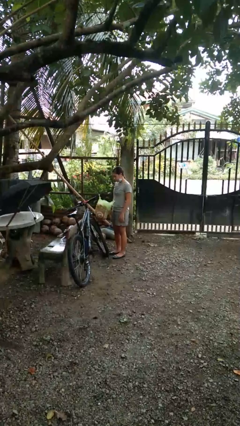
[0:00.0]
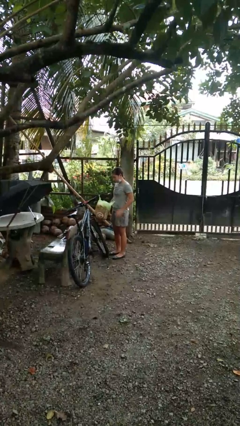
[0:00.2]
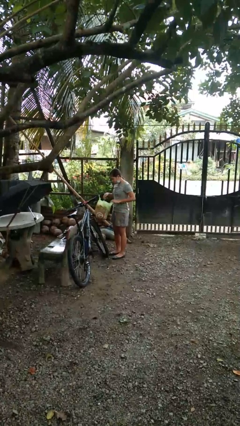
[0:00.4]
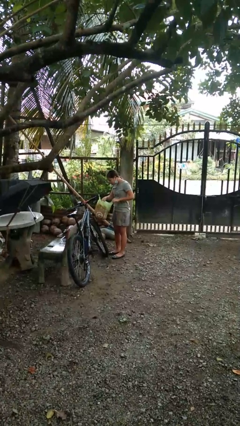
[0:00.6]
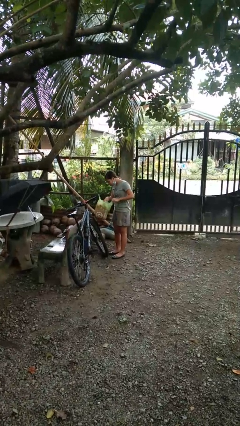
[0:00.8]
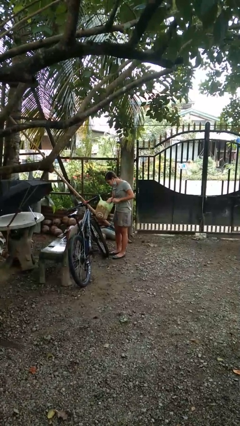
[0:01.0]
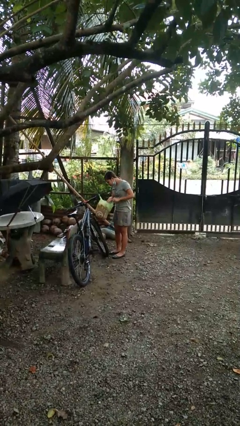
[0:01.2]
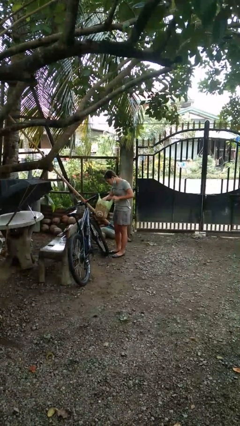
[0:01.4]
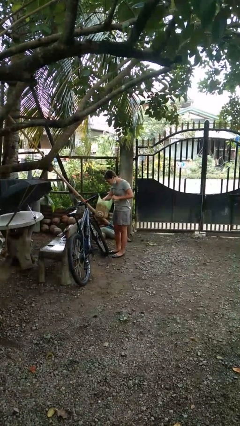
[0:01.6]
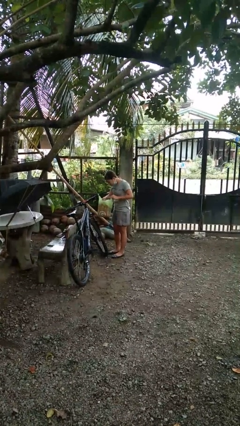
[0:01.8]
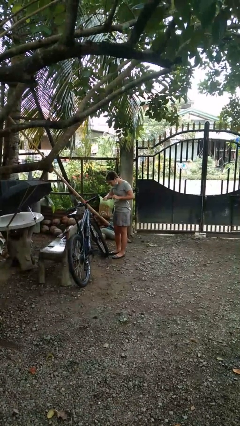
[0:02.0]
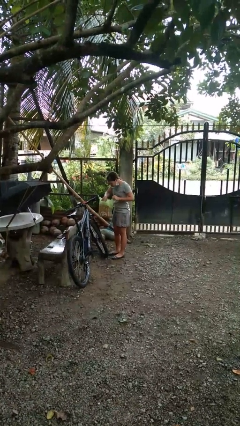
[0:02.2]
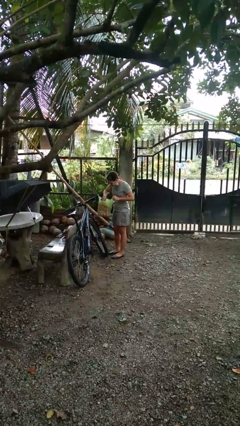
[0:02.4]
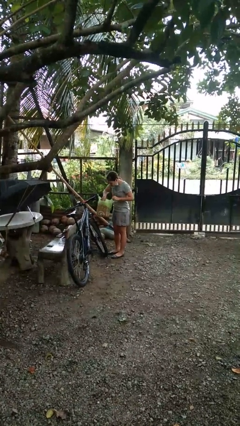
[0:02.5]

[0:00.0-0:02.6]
person searches in bag

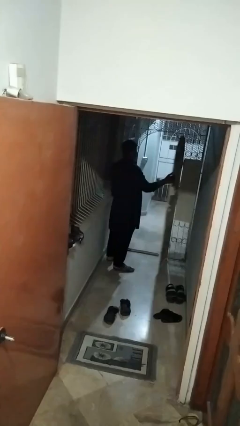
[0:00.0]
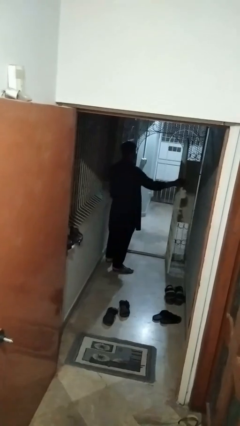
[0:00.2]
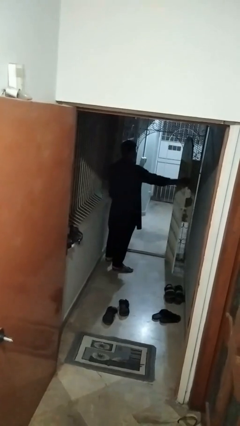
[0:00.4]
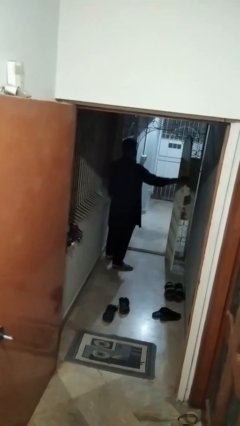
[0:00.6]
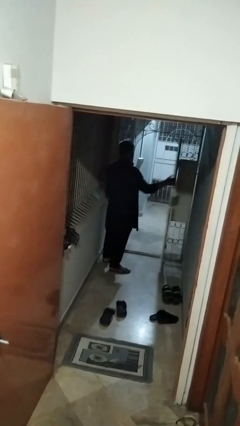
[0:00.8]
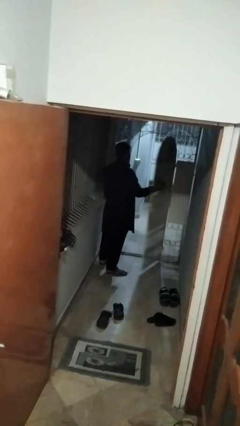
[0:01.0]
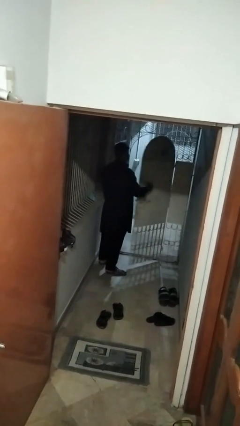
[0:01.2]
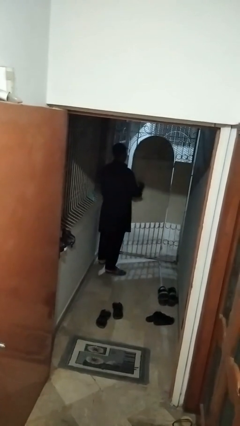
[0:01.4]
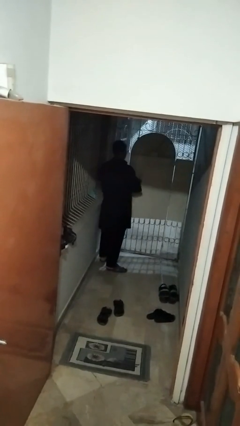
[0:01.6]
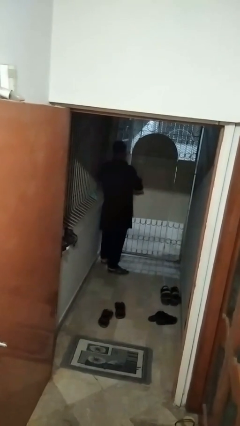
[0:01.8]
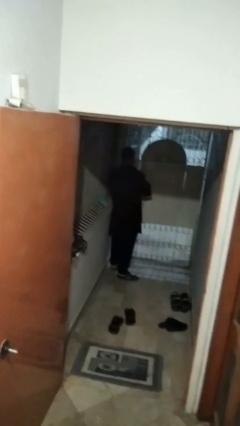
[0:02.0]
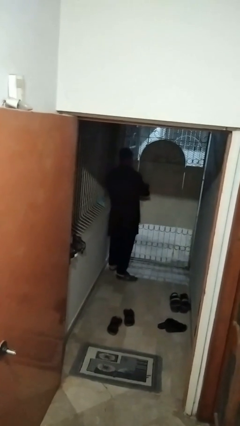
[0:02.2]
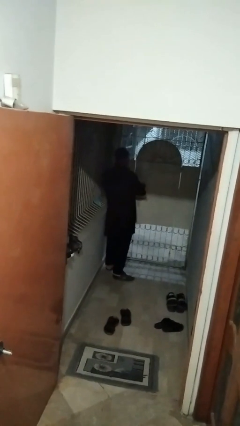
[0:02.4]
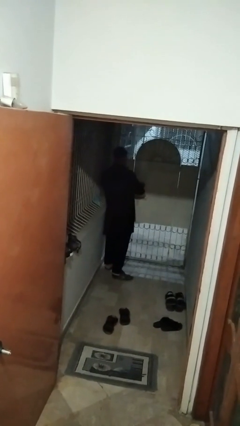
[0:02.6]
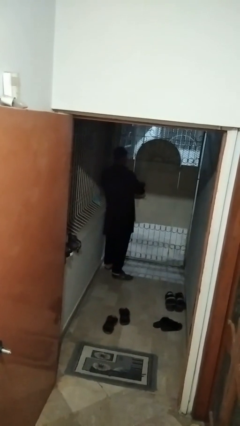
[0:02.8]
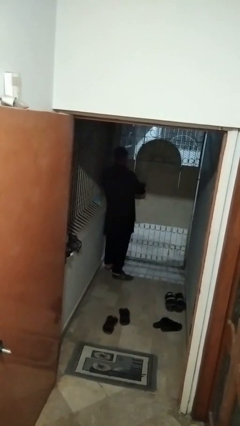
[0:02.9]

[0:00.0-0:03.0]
person closes gate

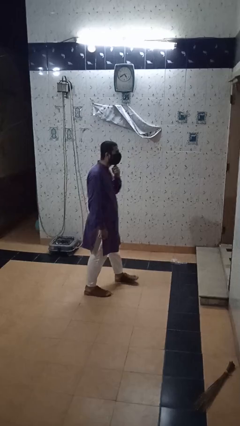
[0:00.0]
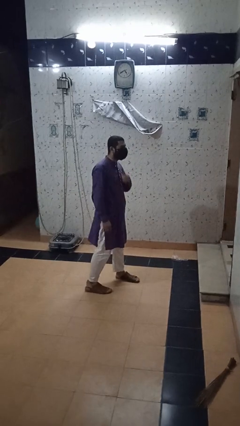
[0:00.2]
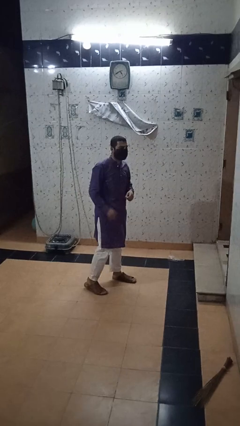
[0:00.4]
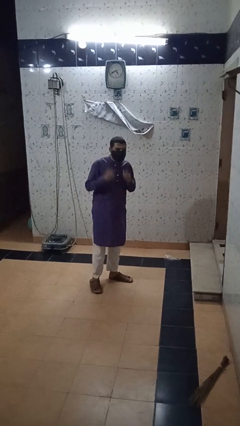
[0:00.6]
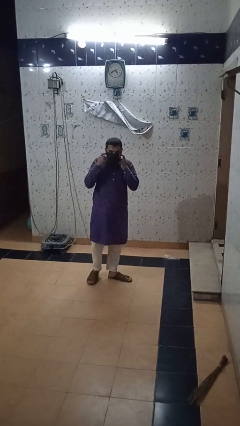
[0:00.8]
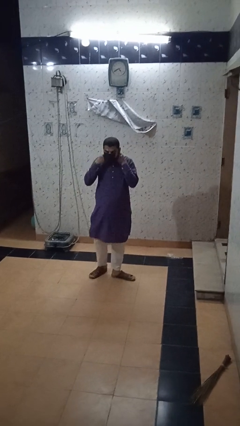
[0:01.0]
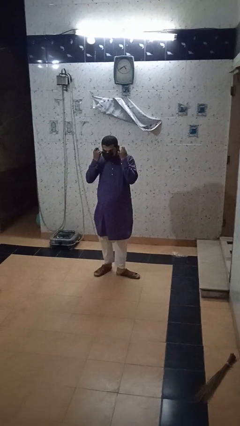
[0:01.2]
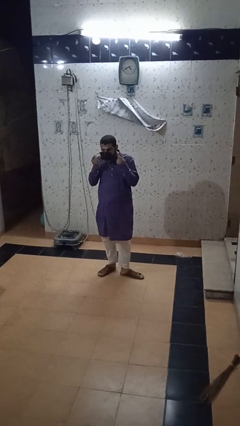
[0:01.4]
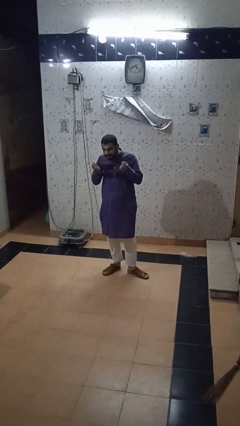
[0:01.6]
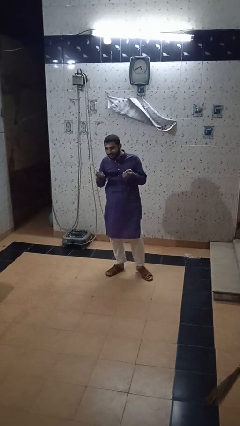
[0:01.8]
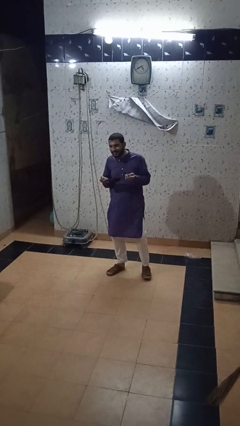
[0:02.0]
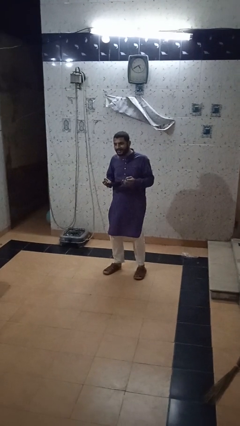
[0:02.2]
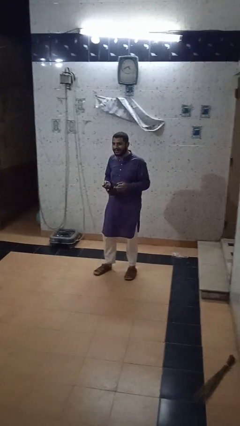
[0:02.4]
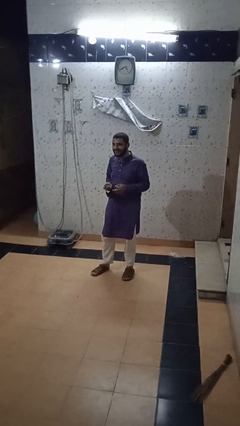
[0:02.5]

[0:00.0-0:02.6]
person takes off facemask

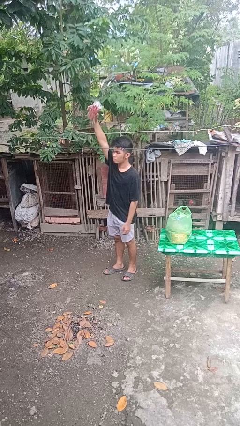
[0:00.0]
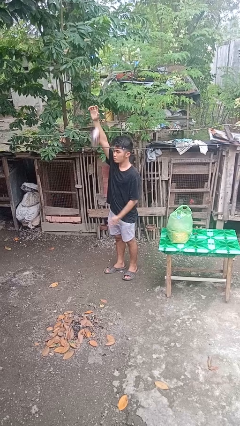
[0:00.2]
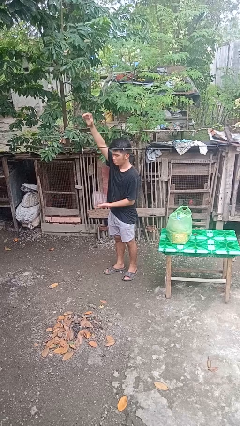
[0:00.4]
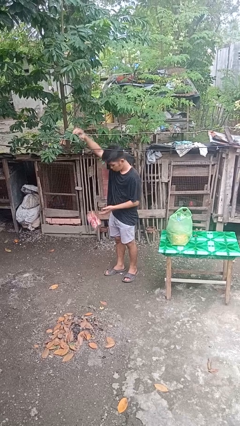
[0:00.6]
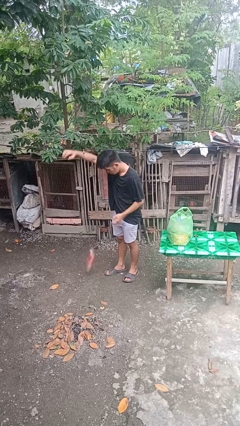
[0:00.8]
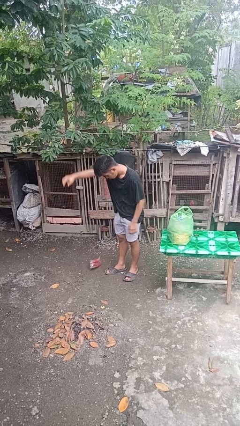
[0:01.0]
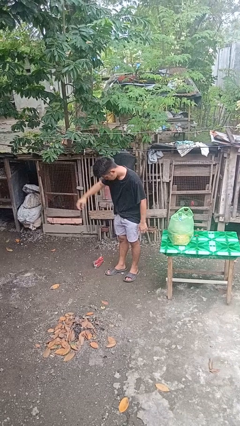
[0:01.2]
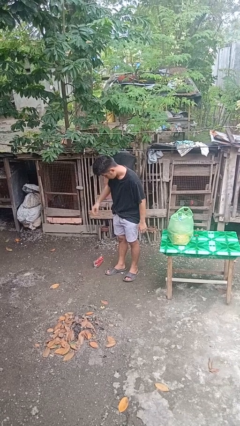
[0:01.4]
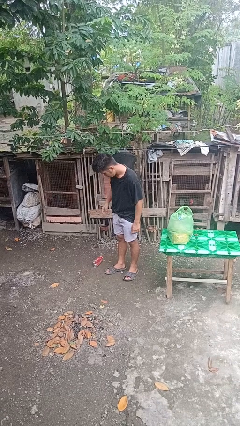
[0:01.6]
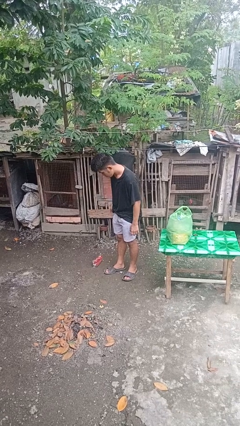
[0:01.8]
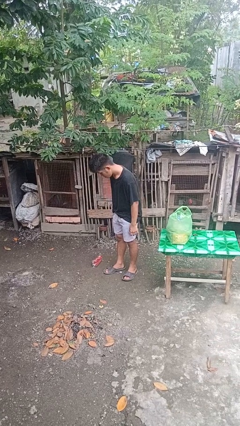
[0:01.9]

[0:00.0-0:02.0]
person drops object

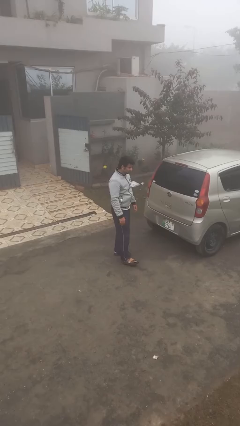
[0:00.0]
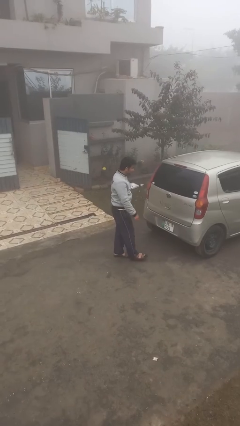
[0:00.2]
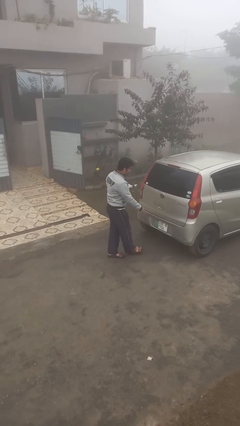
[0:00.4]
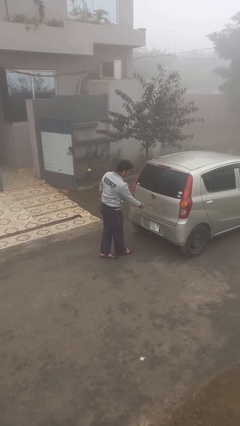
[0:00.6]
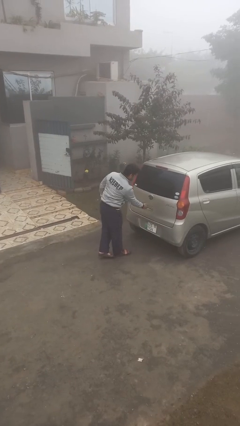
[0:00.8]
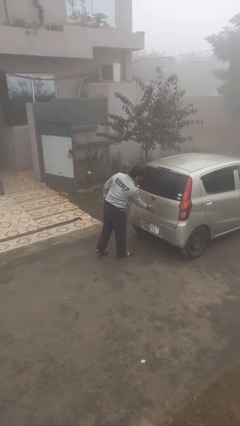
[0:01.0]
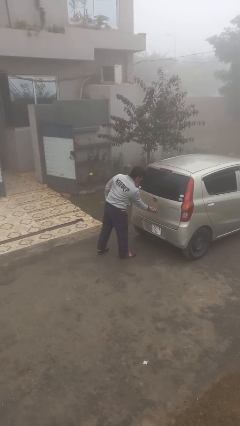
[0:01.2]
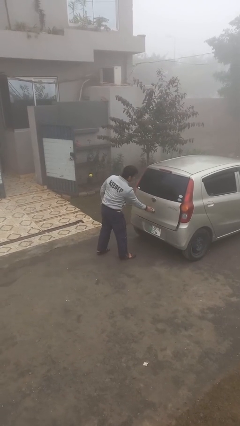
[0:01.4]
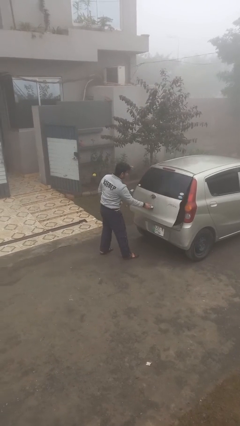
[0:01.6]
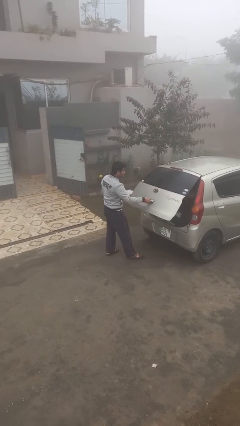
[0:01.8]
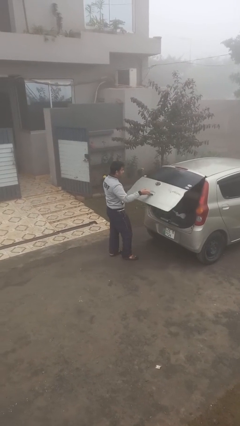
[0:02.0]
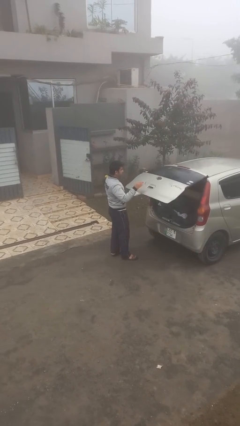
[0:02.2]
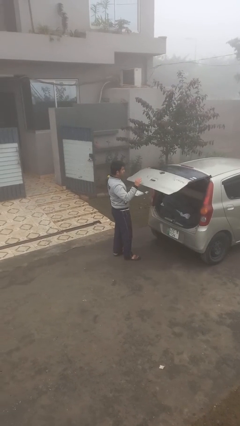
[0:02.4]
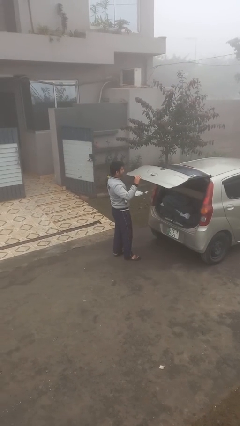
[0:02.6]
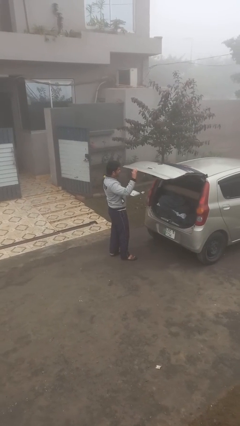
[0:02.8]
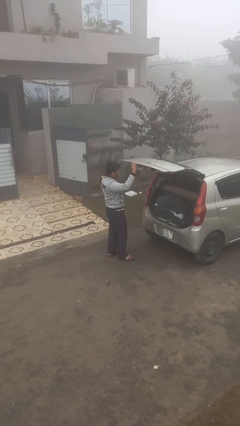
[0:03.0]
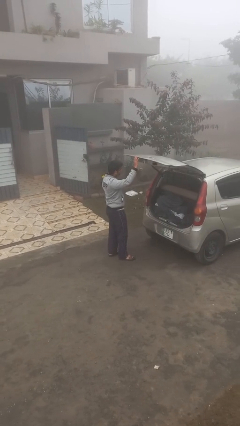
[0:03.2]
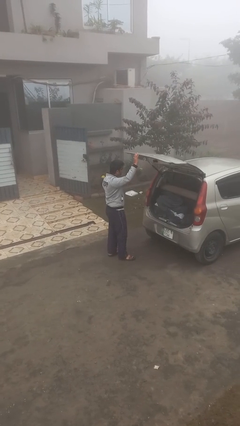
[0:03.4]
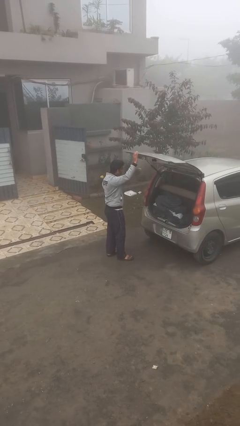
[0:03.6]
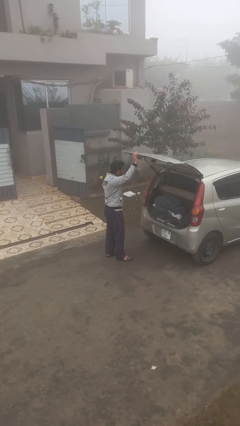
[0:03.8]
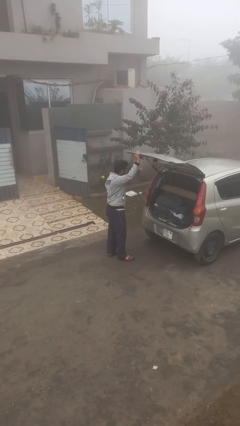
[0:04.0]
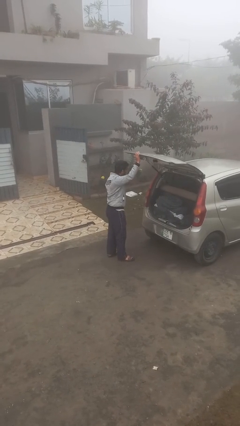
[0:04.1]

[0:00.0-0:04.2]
person opens car trunk

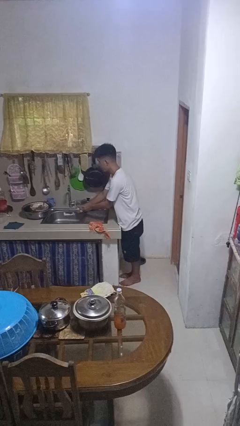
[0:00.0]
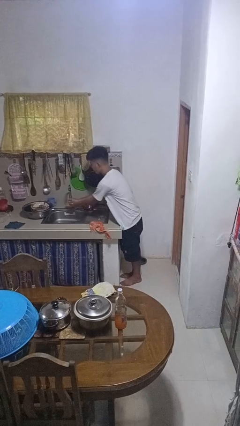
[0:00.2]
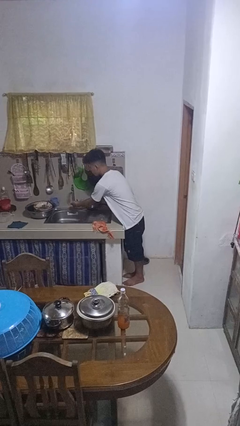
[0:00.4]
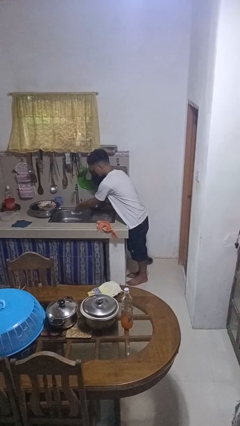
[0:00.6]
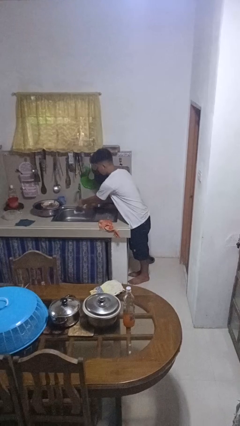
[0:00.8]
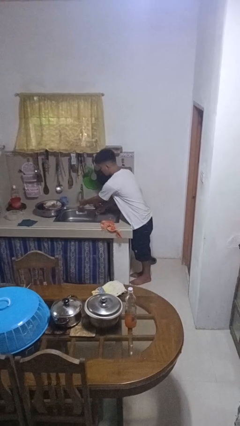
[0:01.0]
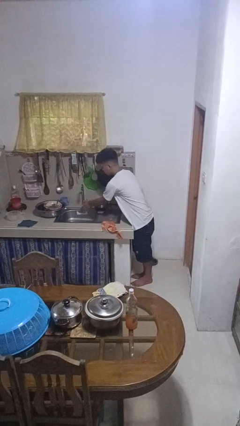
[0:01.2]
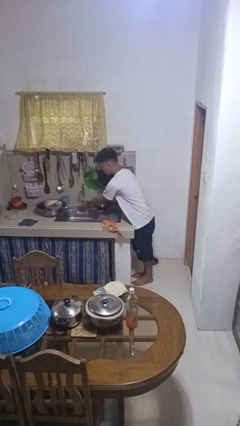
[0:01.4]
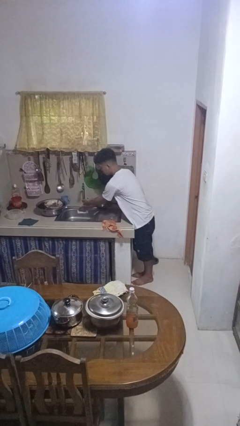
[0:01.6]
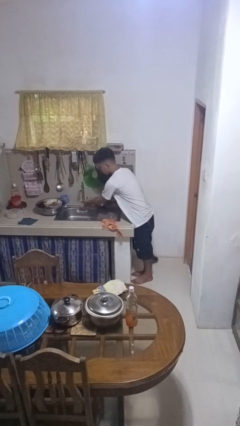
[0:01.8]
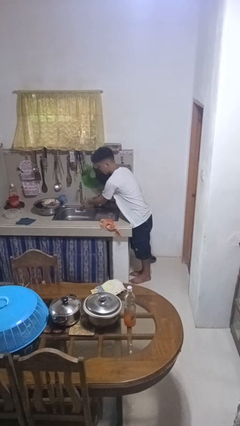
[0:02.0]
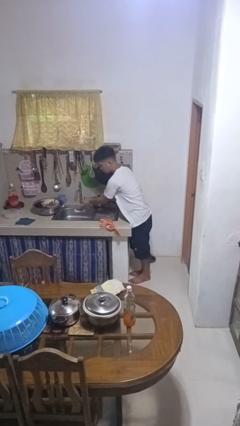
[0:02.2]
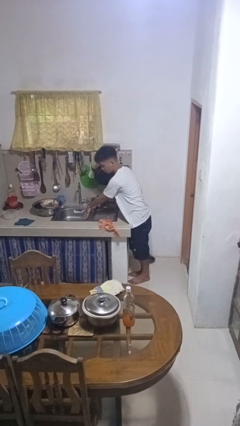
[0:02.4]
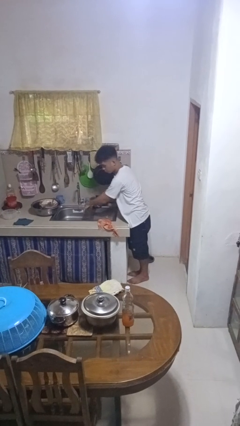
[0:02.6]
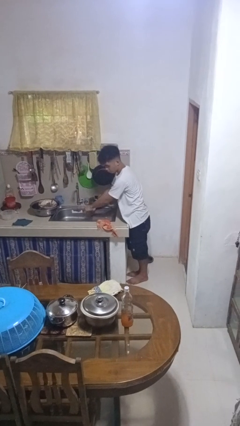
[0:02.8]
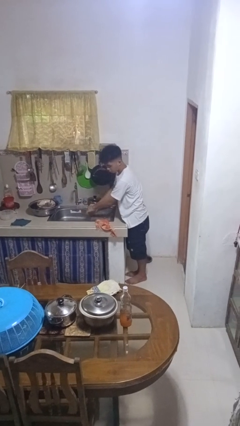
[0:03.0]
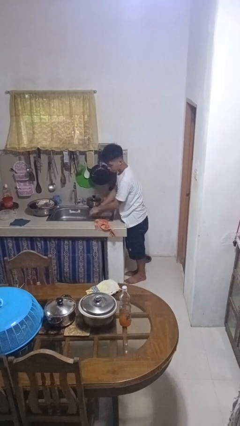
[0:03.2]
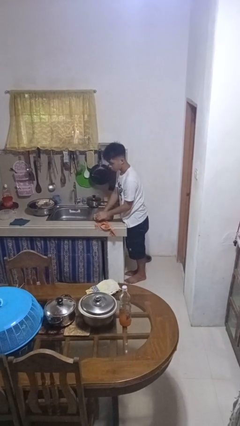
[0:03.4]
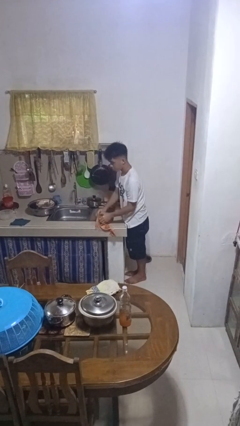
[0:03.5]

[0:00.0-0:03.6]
person washes hands
